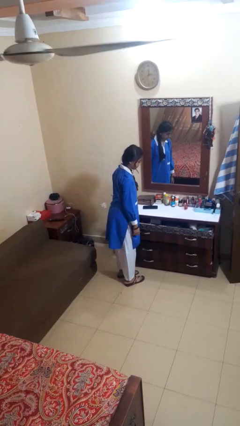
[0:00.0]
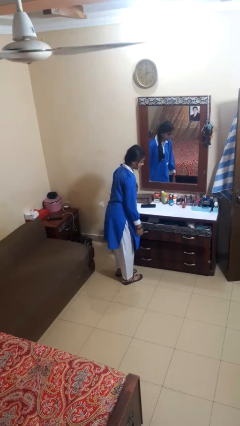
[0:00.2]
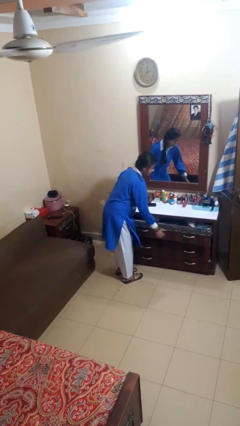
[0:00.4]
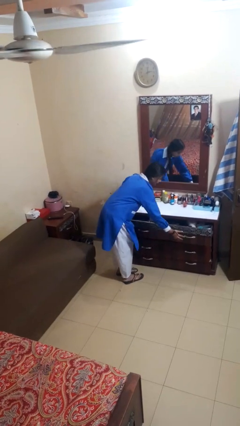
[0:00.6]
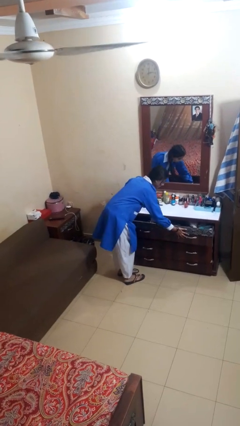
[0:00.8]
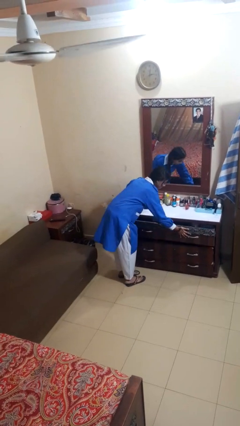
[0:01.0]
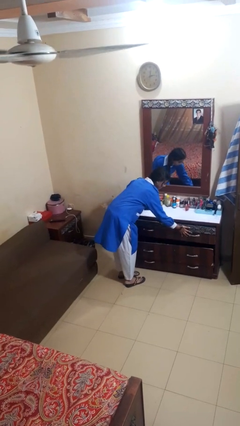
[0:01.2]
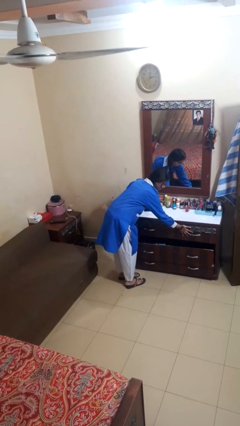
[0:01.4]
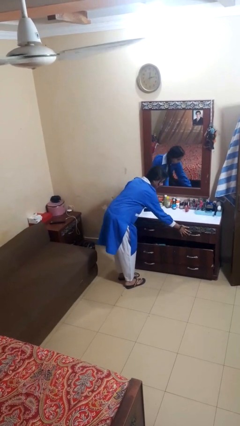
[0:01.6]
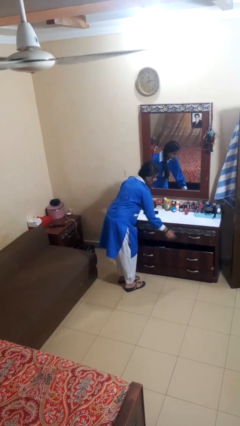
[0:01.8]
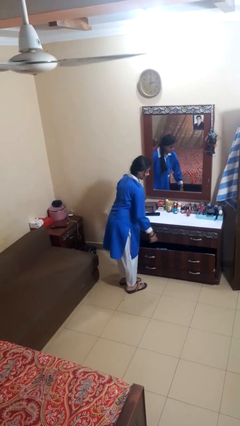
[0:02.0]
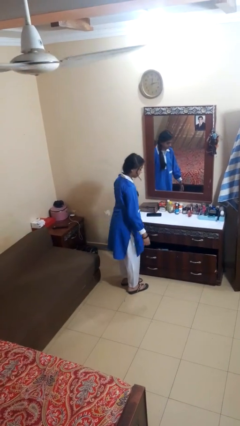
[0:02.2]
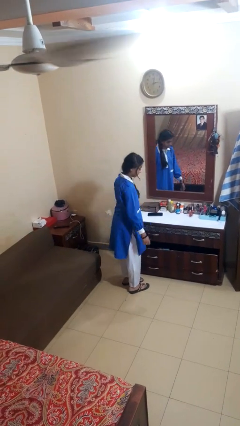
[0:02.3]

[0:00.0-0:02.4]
person closes dresser drawer

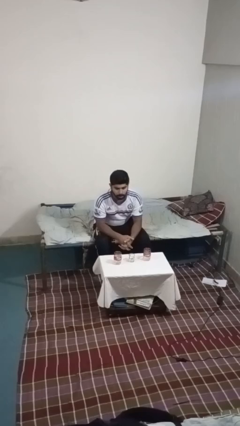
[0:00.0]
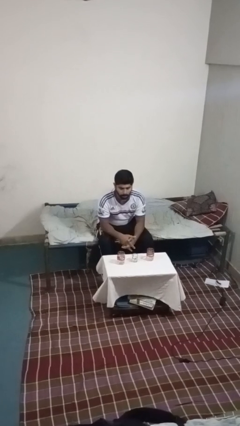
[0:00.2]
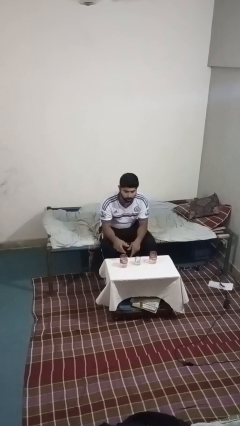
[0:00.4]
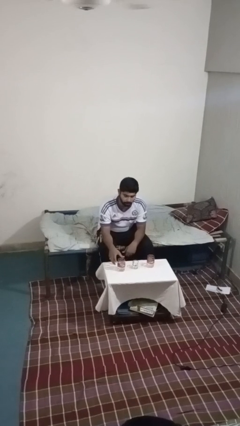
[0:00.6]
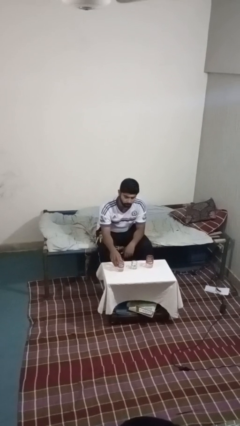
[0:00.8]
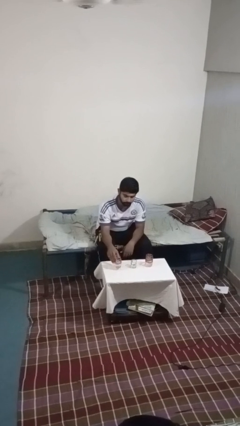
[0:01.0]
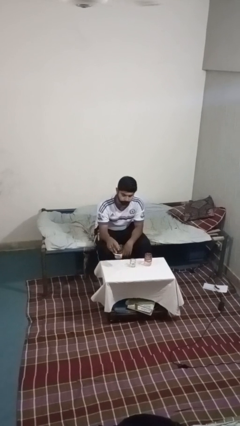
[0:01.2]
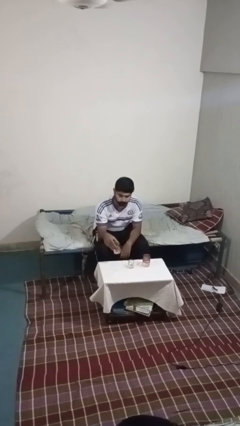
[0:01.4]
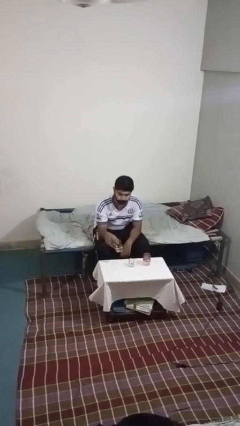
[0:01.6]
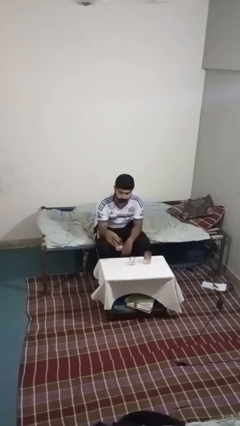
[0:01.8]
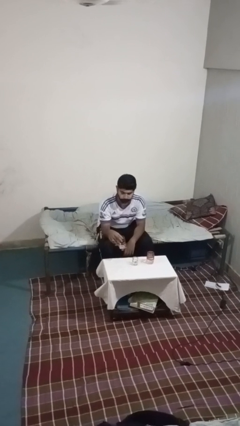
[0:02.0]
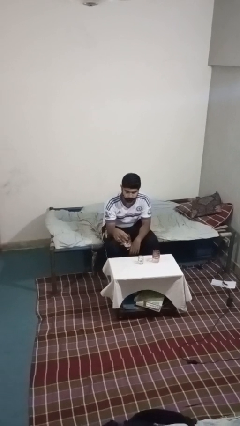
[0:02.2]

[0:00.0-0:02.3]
person picks up object from table

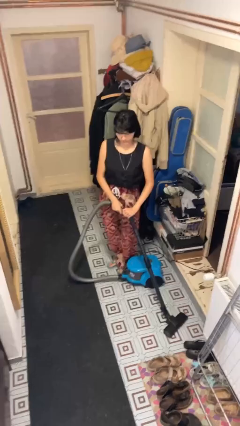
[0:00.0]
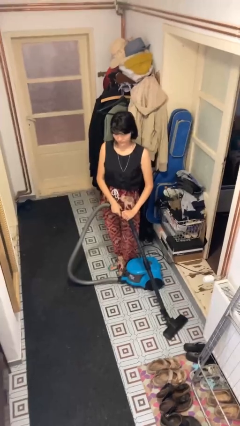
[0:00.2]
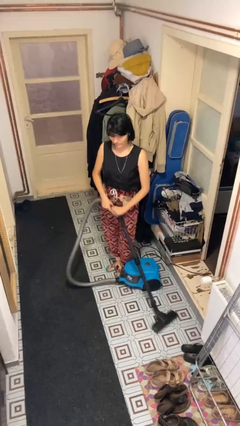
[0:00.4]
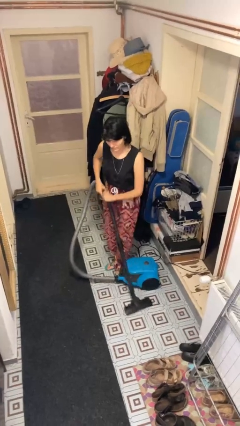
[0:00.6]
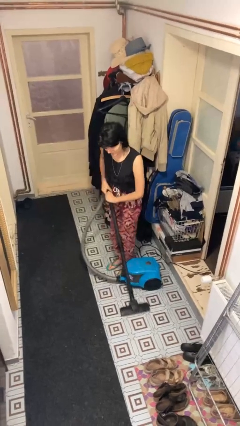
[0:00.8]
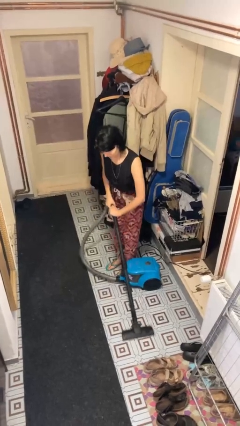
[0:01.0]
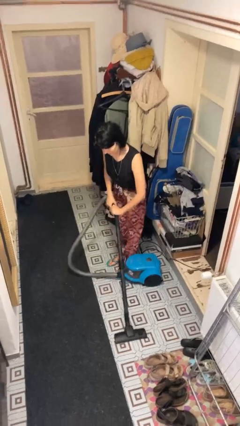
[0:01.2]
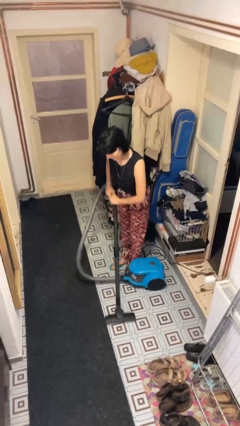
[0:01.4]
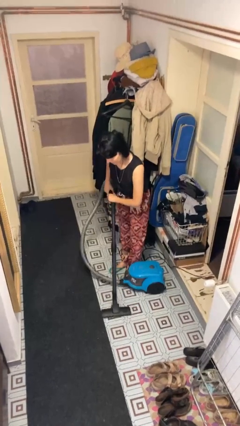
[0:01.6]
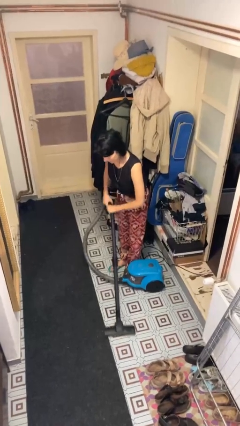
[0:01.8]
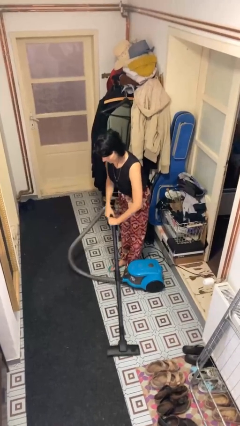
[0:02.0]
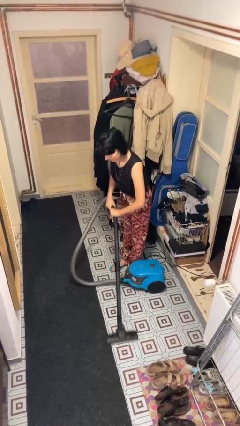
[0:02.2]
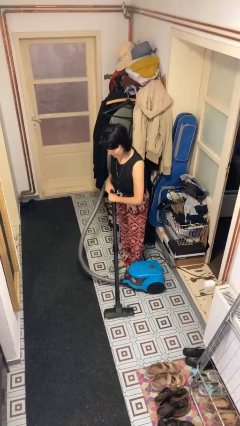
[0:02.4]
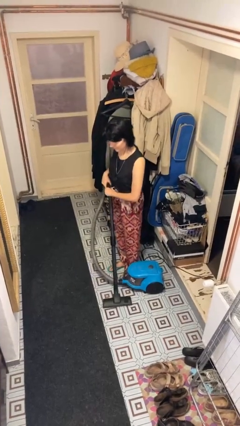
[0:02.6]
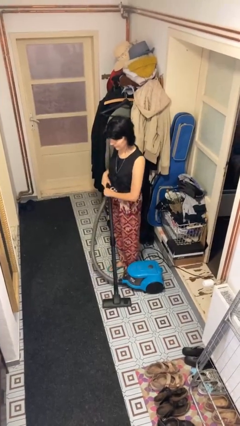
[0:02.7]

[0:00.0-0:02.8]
person vacuums carpet

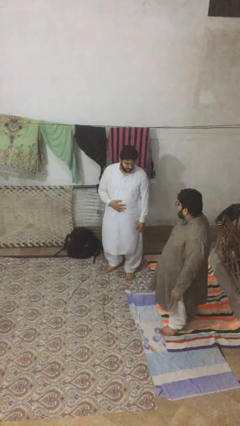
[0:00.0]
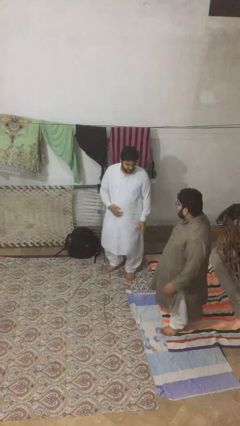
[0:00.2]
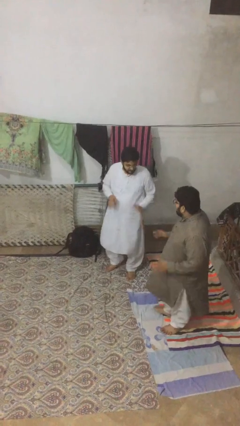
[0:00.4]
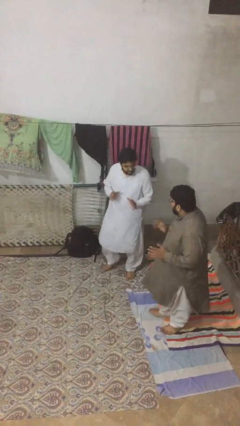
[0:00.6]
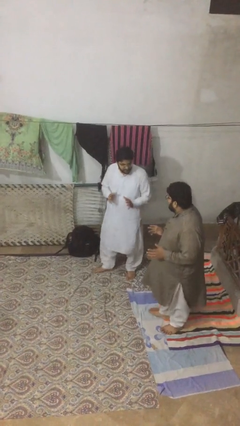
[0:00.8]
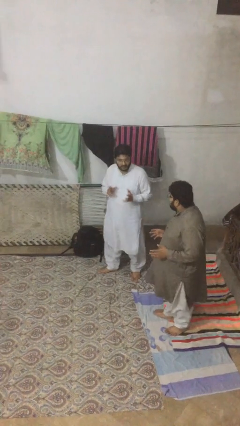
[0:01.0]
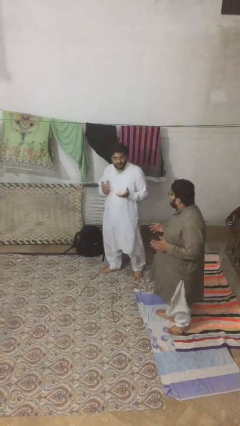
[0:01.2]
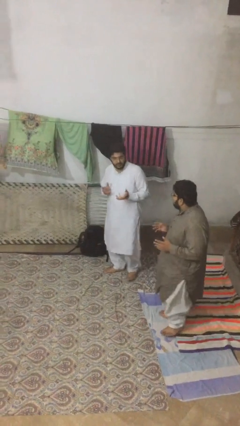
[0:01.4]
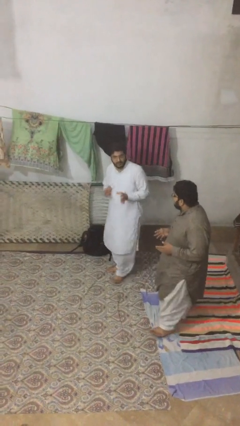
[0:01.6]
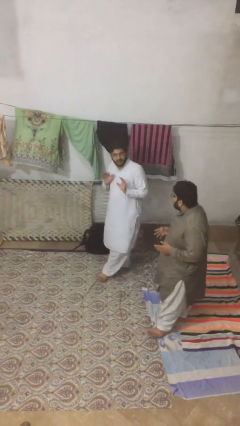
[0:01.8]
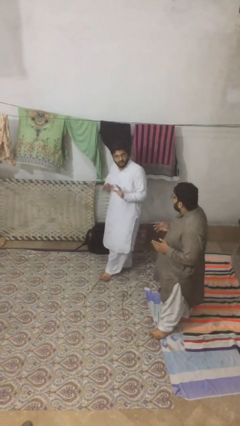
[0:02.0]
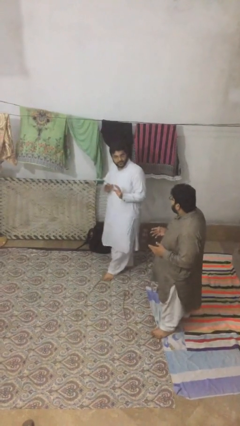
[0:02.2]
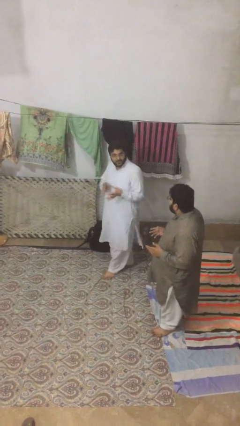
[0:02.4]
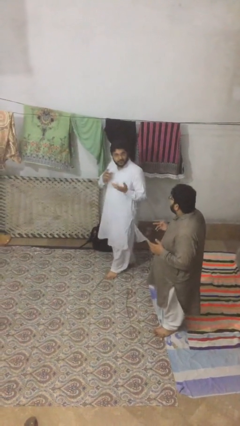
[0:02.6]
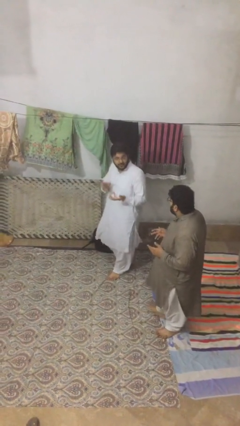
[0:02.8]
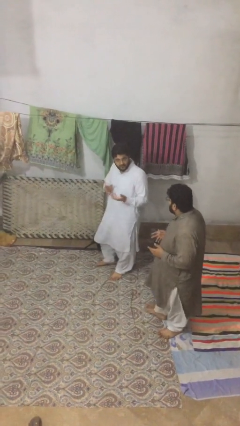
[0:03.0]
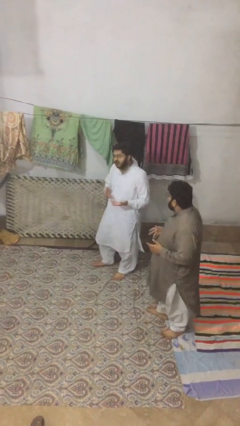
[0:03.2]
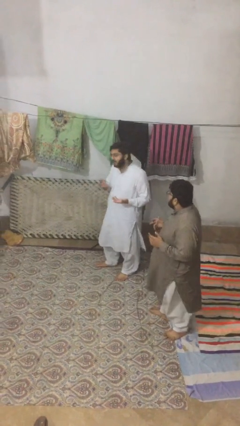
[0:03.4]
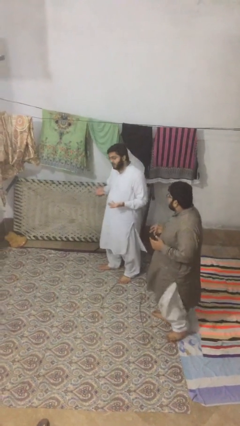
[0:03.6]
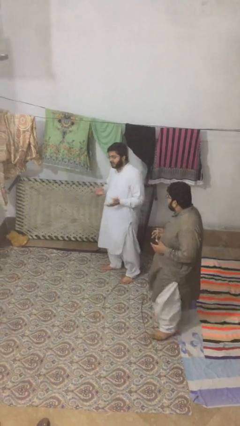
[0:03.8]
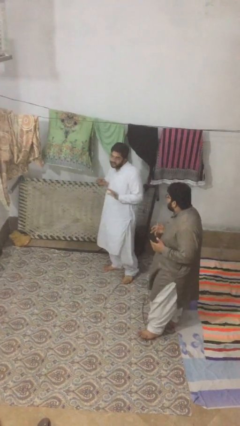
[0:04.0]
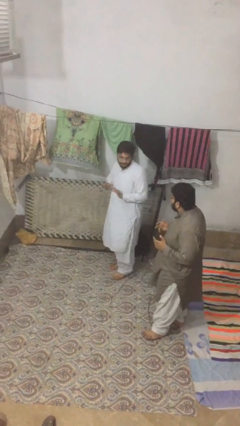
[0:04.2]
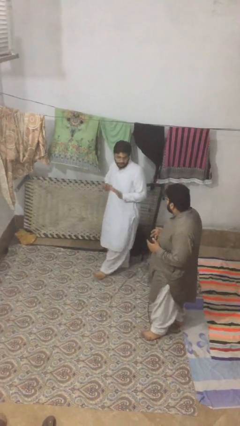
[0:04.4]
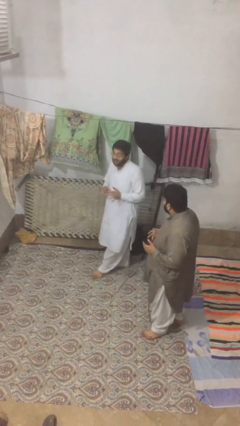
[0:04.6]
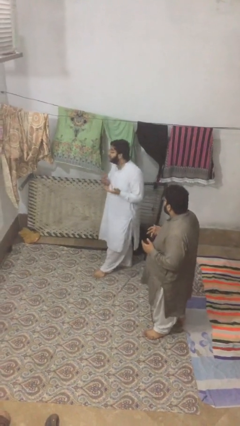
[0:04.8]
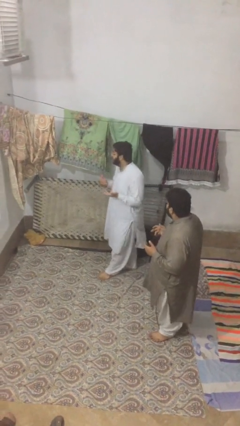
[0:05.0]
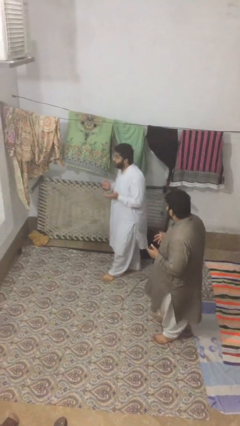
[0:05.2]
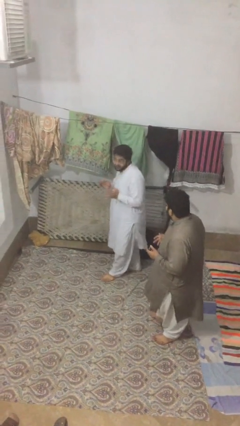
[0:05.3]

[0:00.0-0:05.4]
person talks to person

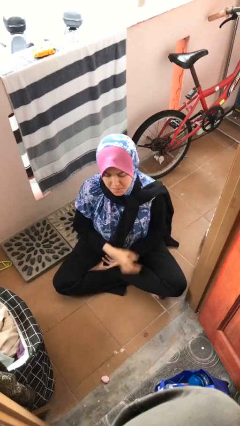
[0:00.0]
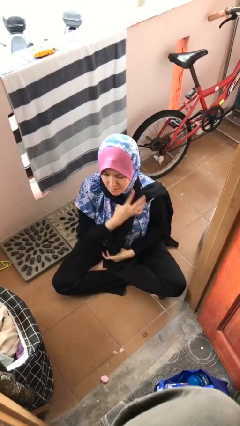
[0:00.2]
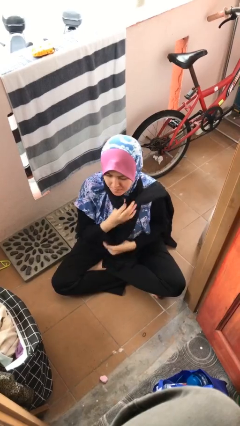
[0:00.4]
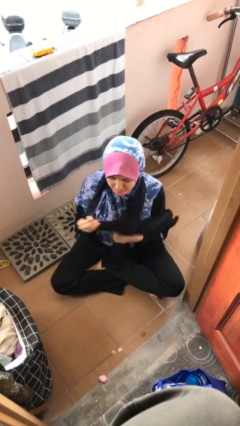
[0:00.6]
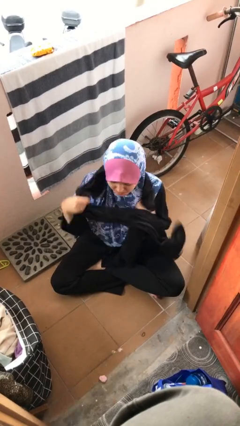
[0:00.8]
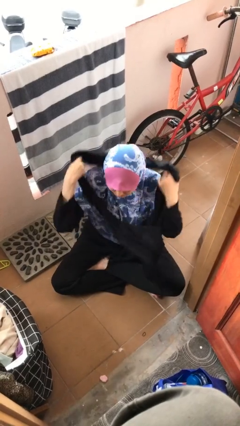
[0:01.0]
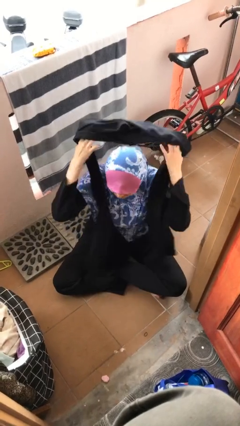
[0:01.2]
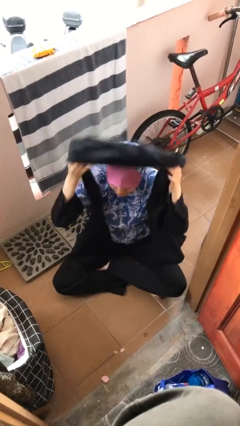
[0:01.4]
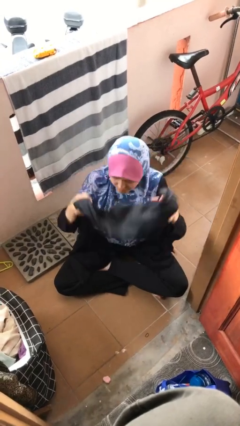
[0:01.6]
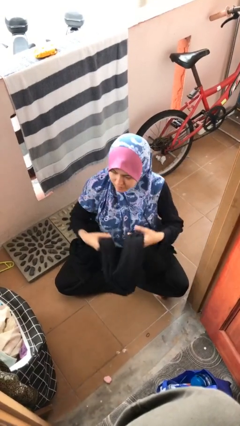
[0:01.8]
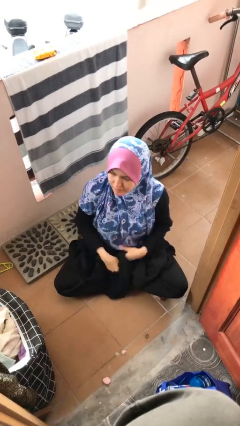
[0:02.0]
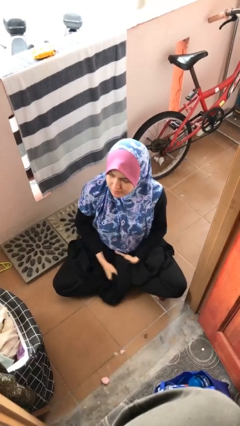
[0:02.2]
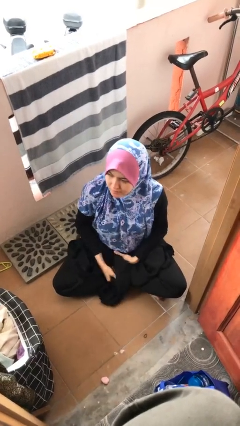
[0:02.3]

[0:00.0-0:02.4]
person takes off scarf

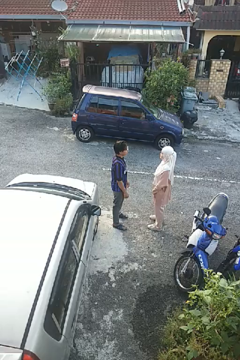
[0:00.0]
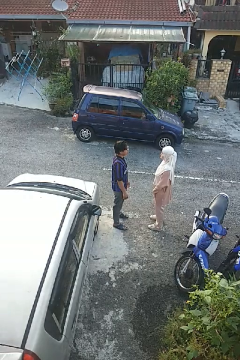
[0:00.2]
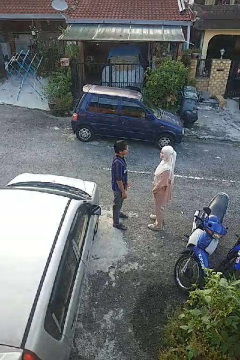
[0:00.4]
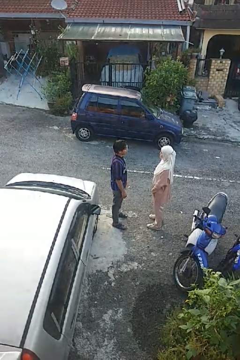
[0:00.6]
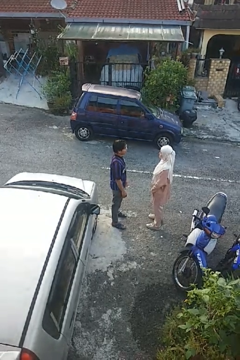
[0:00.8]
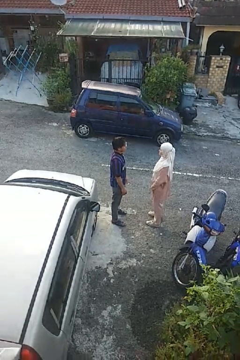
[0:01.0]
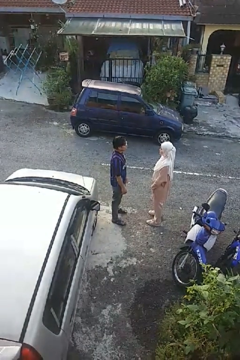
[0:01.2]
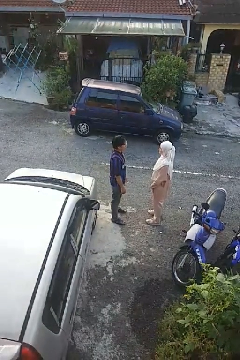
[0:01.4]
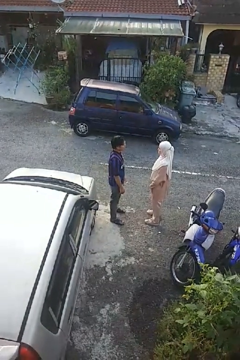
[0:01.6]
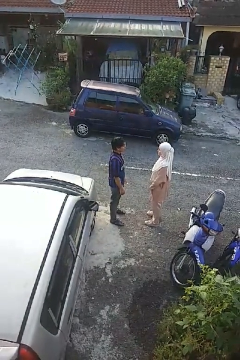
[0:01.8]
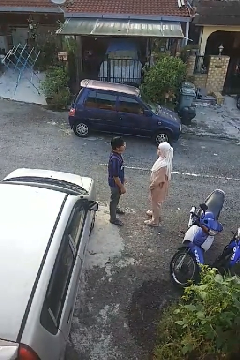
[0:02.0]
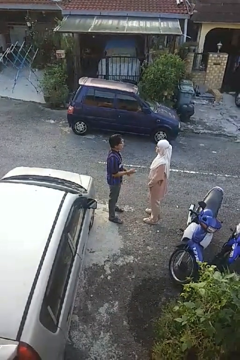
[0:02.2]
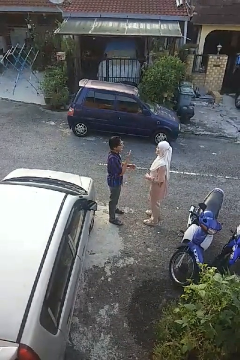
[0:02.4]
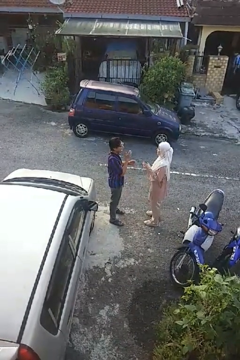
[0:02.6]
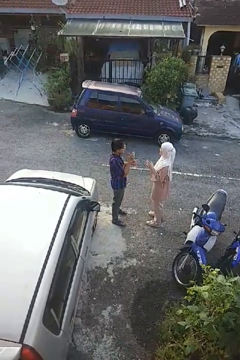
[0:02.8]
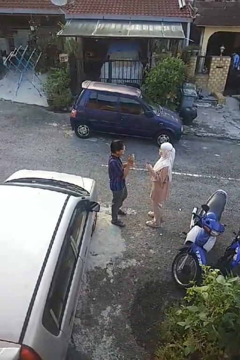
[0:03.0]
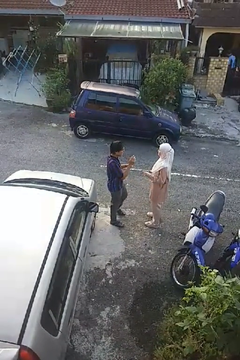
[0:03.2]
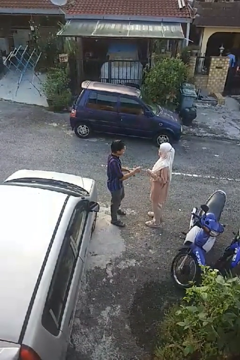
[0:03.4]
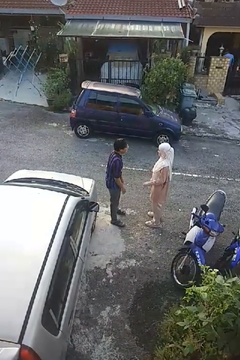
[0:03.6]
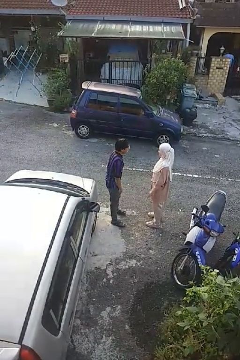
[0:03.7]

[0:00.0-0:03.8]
person laughs with person
